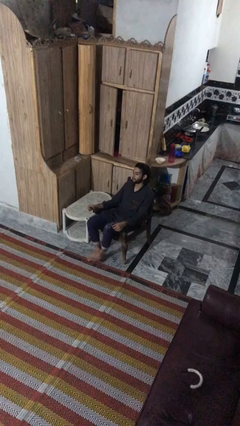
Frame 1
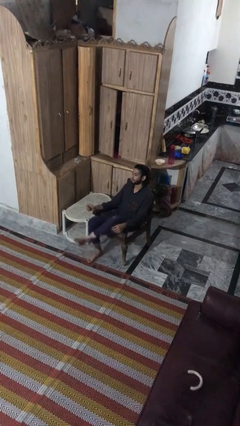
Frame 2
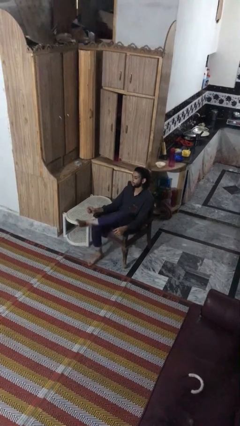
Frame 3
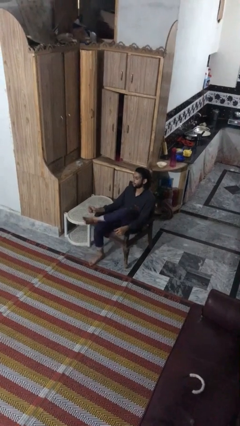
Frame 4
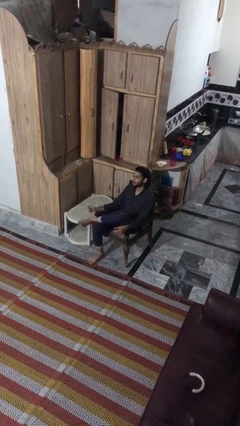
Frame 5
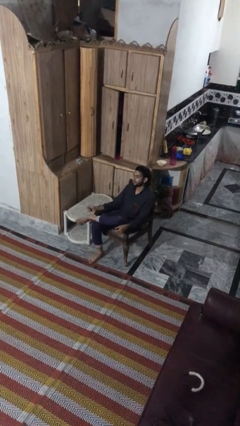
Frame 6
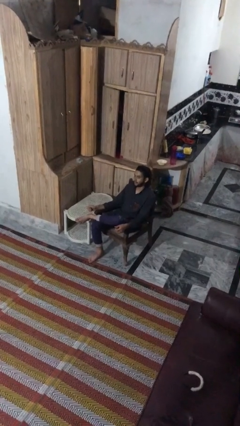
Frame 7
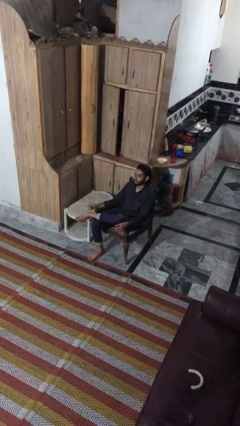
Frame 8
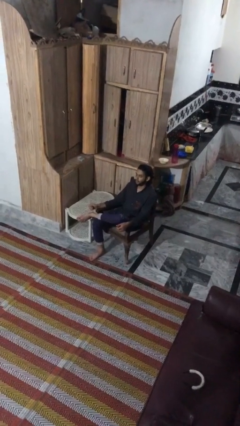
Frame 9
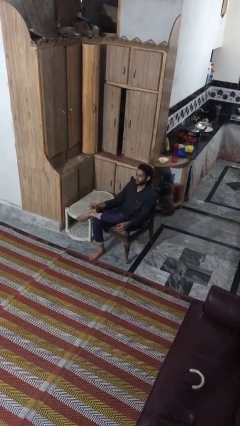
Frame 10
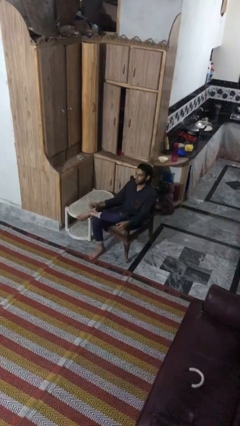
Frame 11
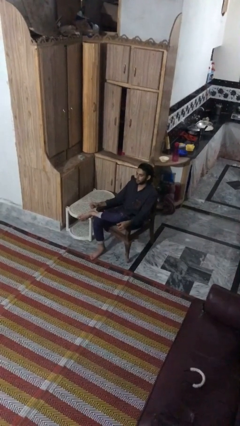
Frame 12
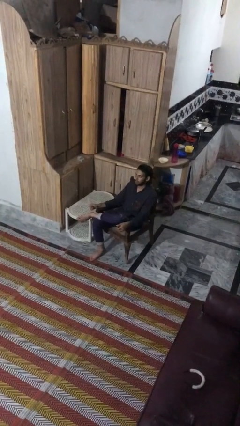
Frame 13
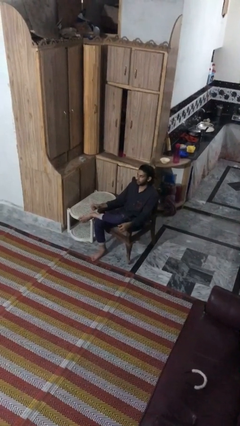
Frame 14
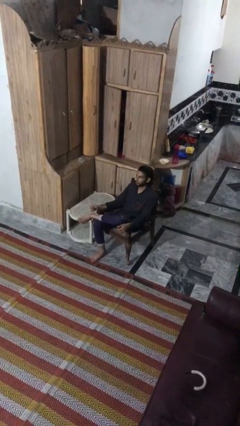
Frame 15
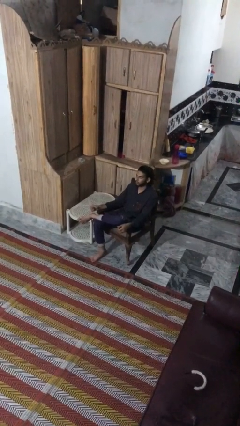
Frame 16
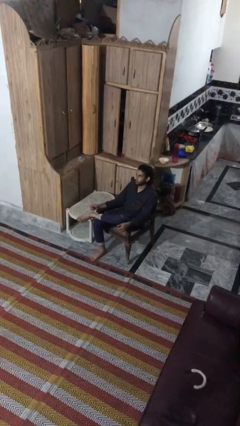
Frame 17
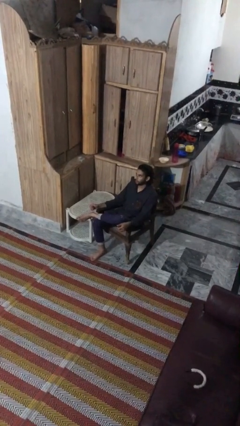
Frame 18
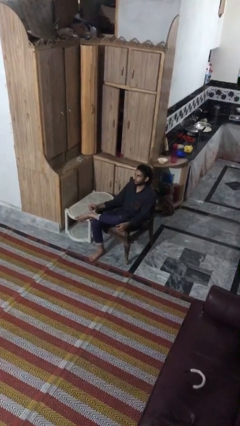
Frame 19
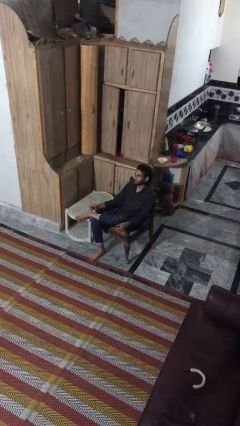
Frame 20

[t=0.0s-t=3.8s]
person crosses legs

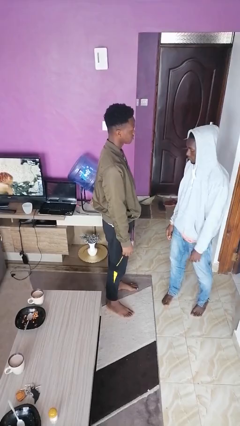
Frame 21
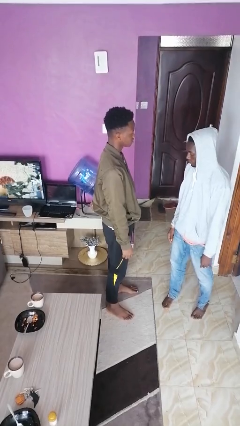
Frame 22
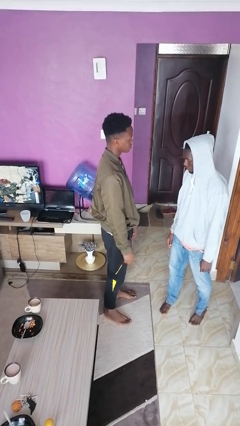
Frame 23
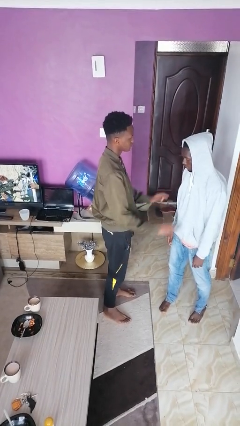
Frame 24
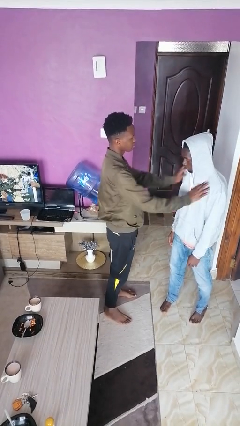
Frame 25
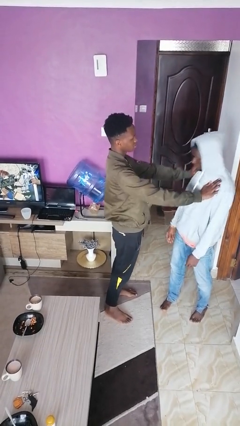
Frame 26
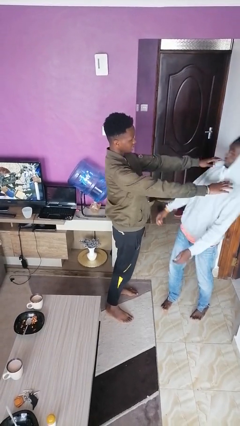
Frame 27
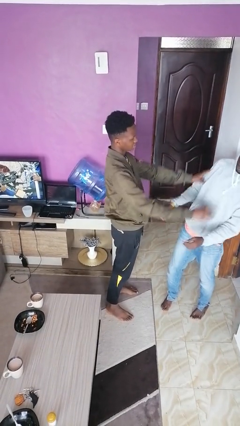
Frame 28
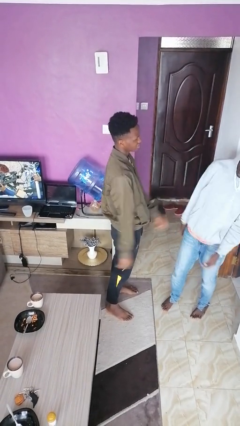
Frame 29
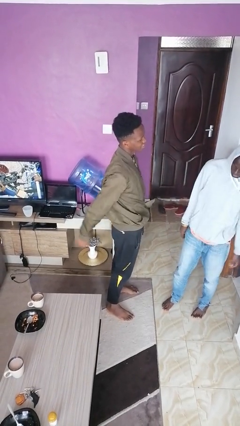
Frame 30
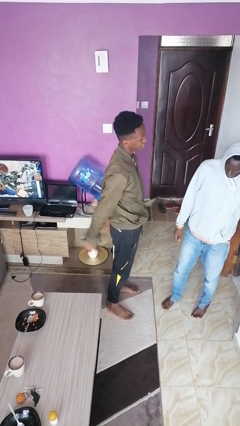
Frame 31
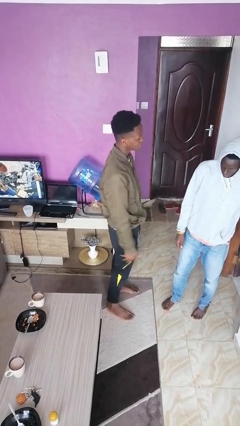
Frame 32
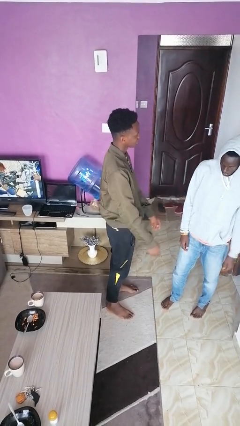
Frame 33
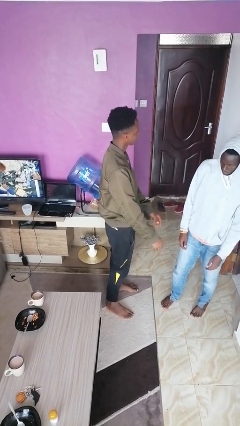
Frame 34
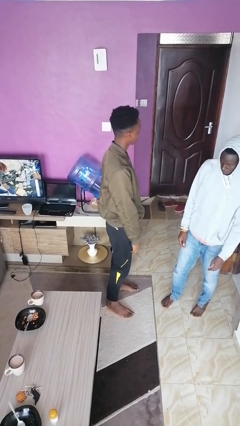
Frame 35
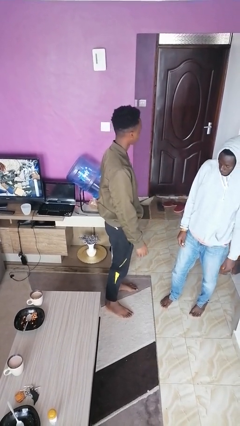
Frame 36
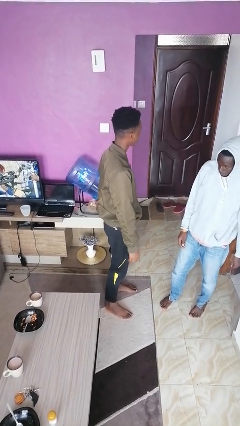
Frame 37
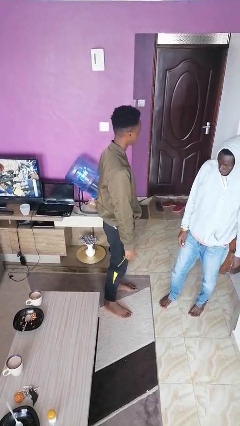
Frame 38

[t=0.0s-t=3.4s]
person shoves person

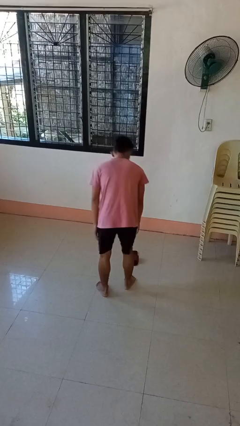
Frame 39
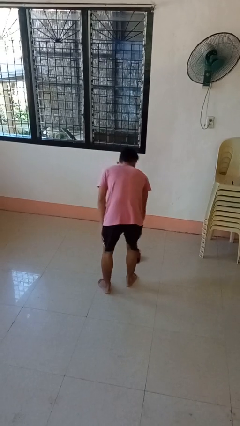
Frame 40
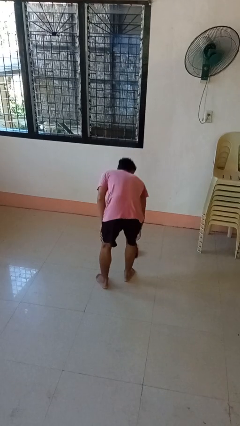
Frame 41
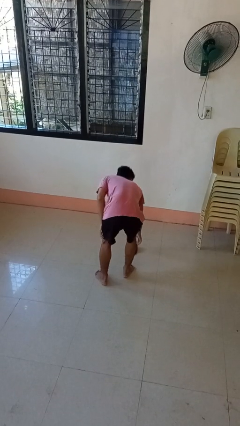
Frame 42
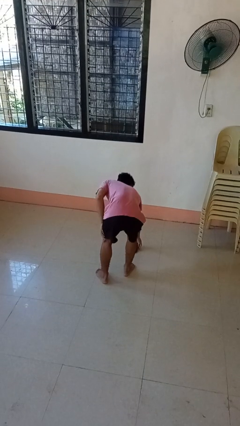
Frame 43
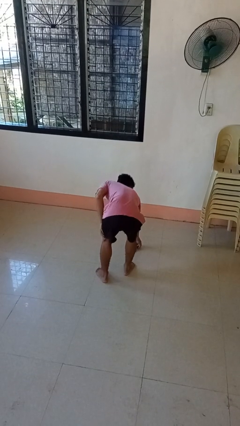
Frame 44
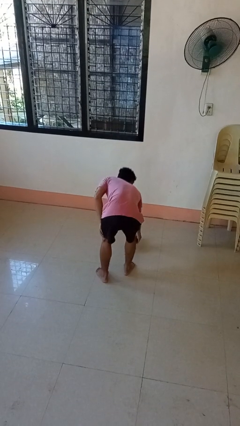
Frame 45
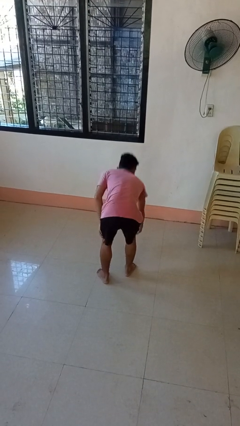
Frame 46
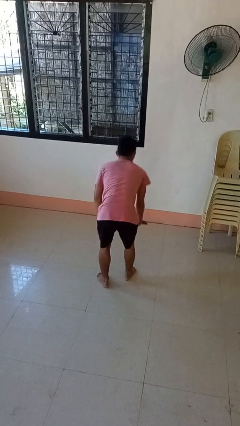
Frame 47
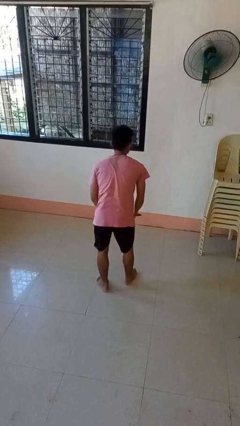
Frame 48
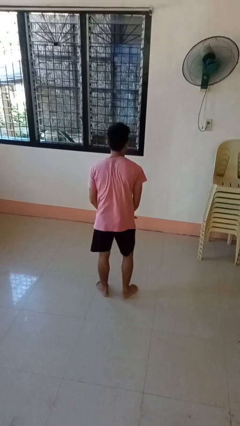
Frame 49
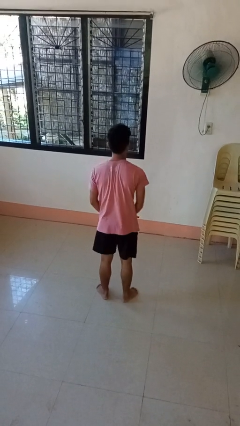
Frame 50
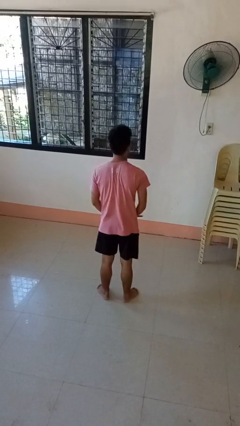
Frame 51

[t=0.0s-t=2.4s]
person picks up object from floor

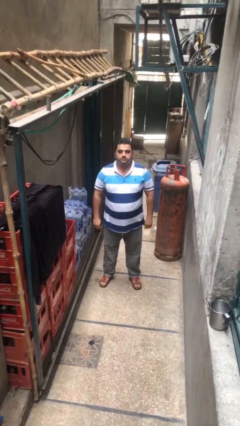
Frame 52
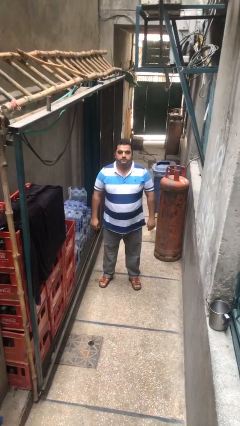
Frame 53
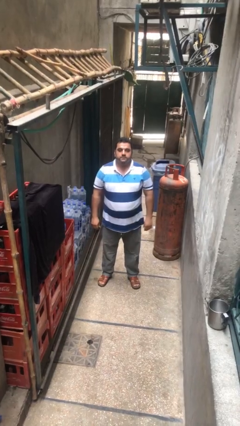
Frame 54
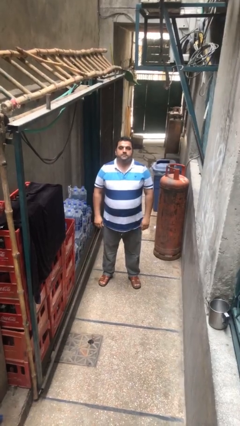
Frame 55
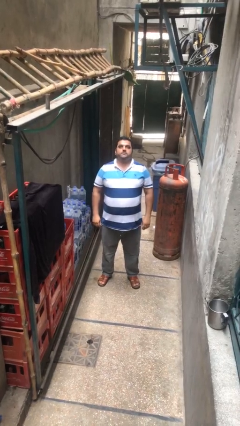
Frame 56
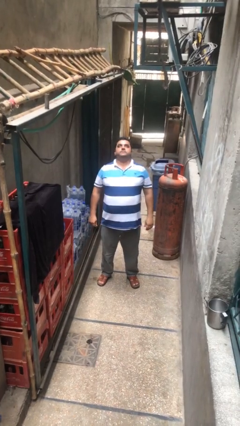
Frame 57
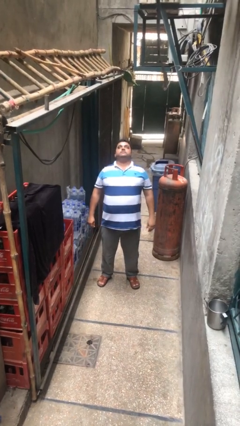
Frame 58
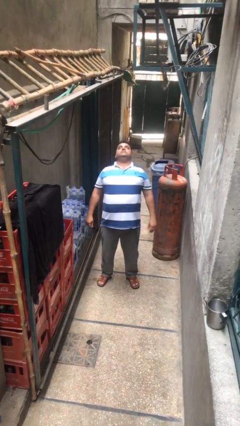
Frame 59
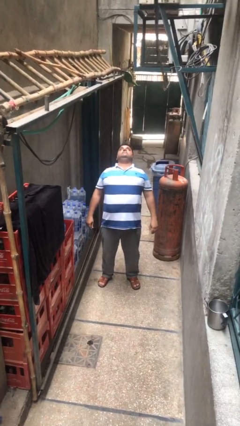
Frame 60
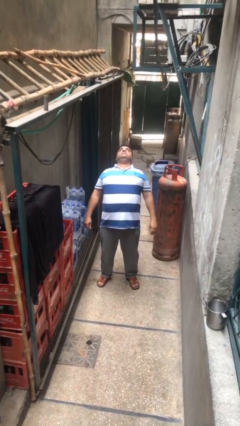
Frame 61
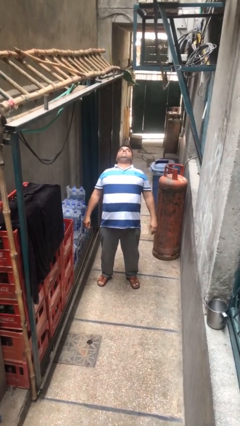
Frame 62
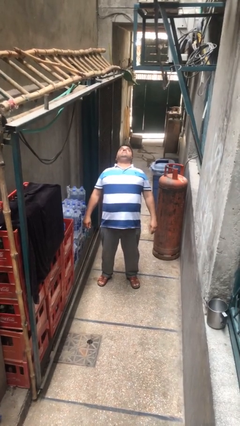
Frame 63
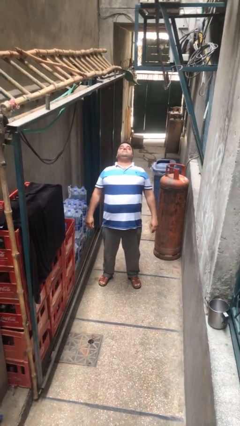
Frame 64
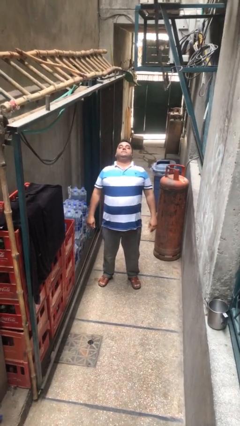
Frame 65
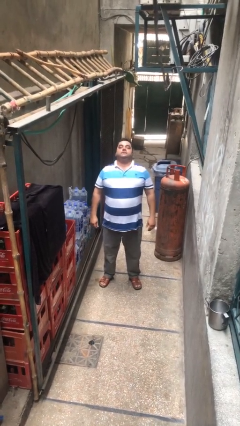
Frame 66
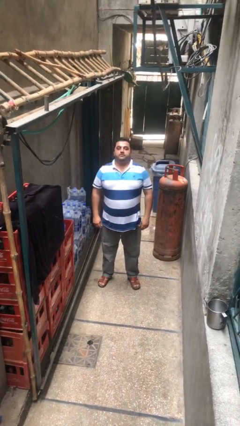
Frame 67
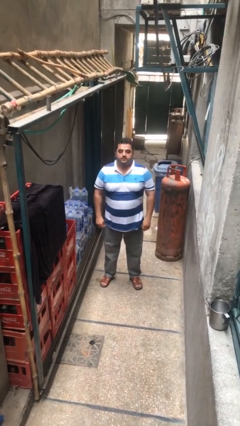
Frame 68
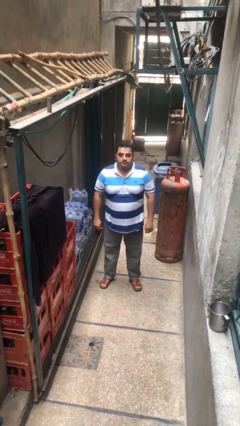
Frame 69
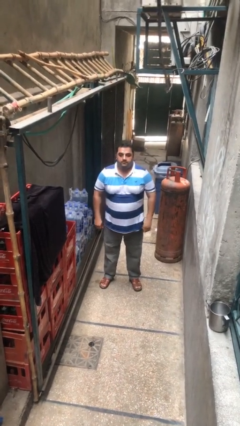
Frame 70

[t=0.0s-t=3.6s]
person stretches back

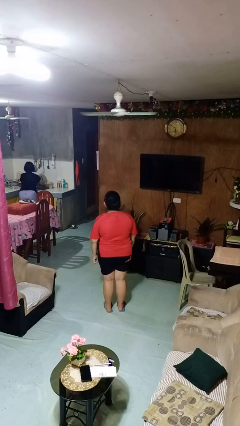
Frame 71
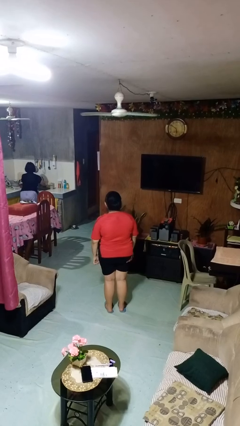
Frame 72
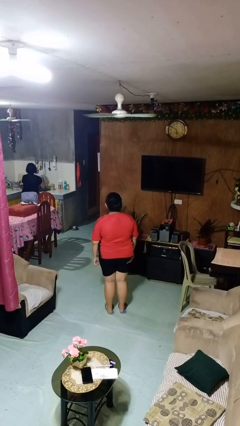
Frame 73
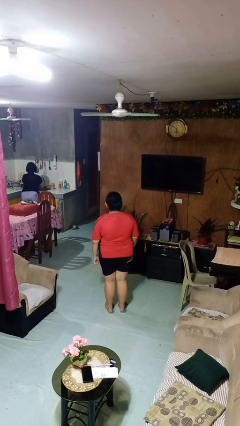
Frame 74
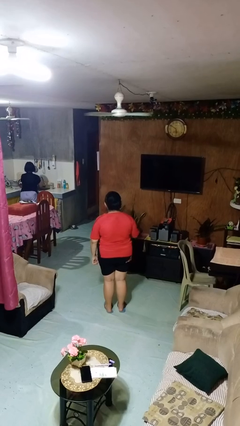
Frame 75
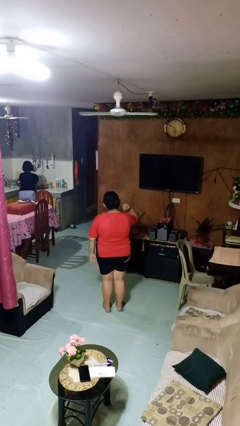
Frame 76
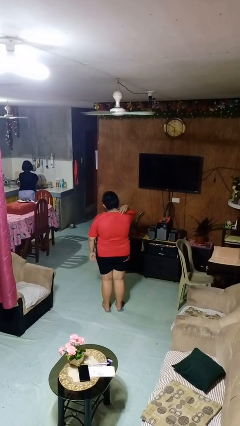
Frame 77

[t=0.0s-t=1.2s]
person rubs neck

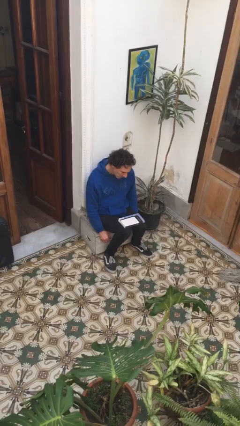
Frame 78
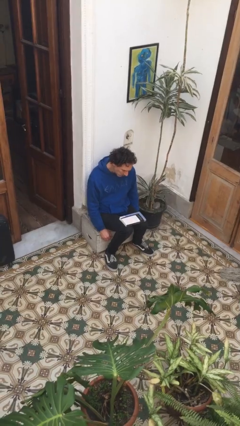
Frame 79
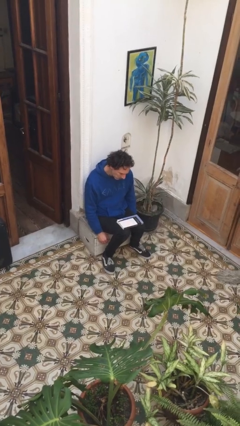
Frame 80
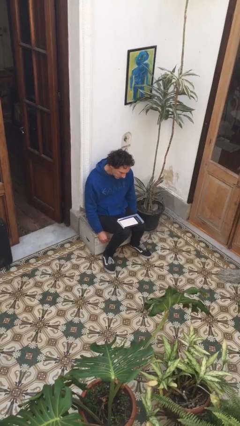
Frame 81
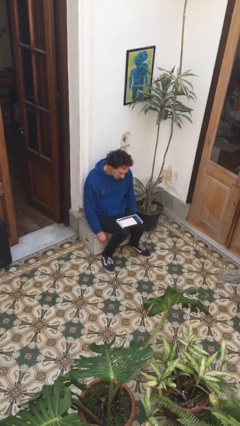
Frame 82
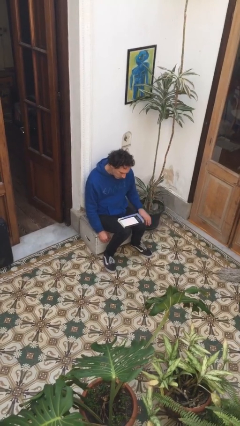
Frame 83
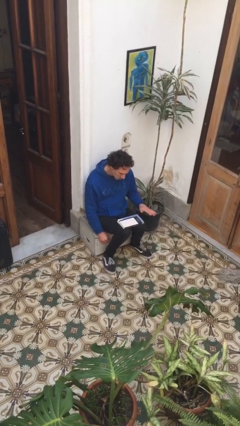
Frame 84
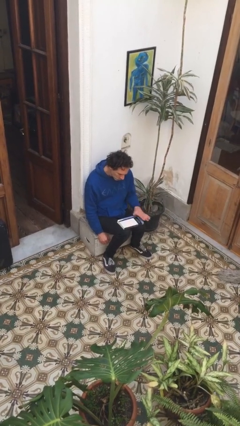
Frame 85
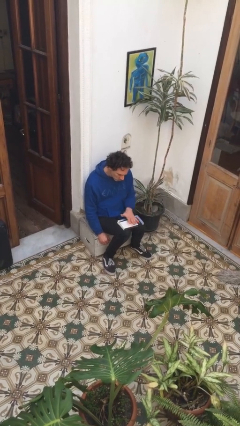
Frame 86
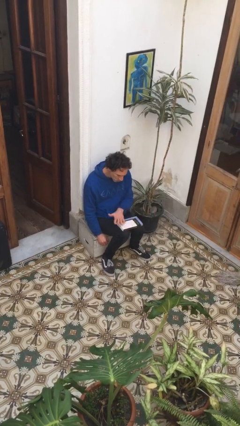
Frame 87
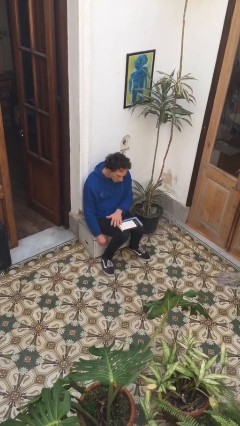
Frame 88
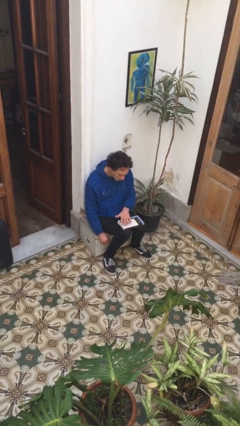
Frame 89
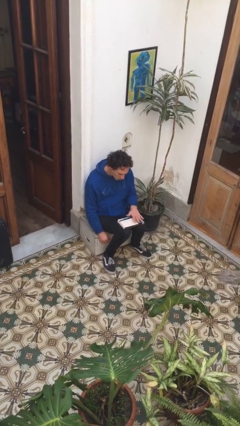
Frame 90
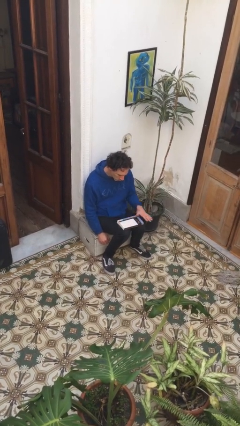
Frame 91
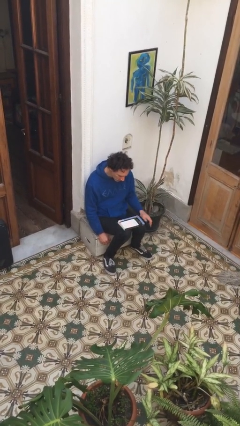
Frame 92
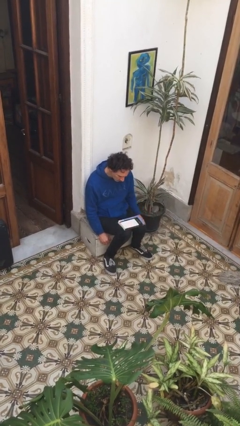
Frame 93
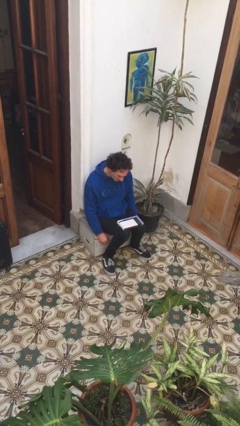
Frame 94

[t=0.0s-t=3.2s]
person waves hand over object
